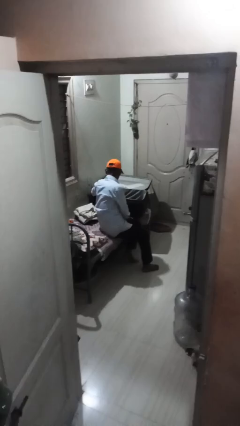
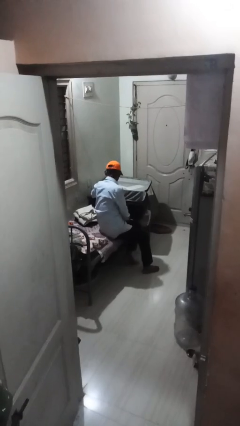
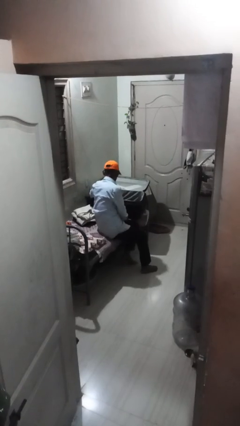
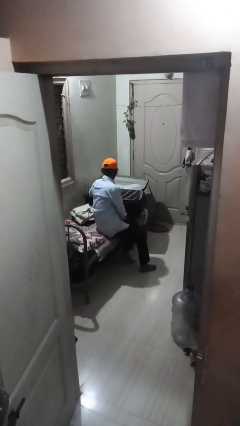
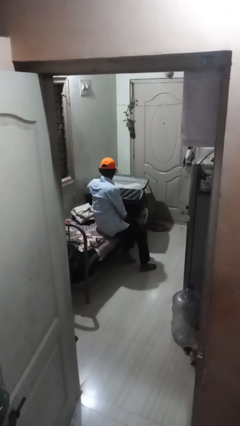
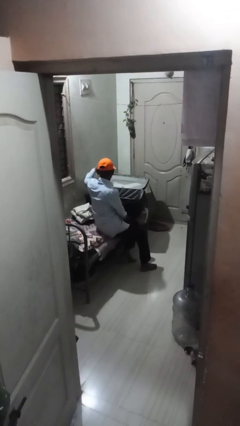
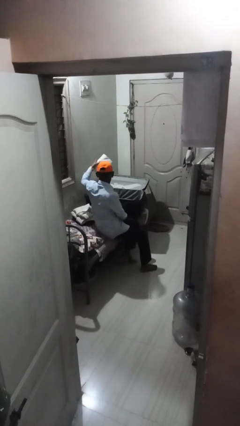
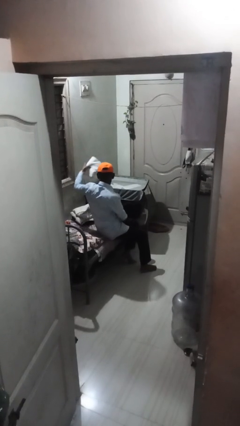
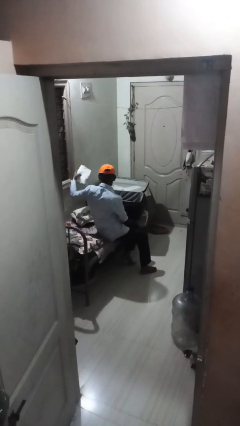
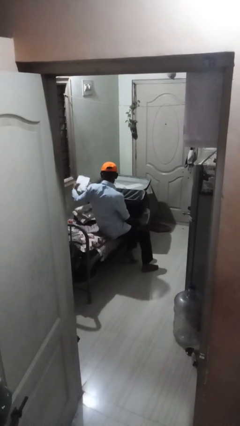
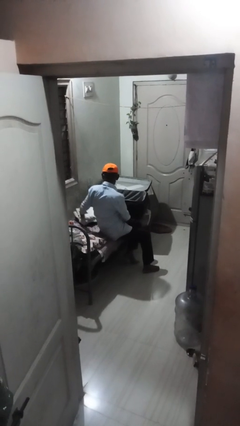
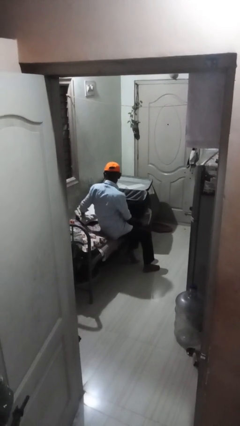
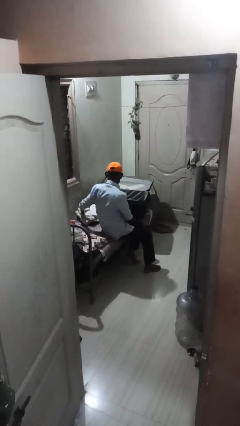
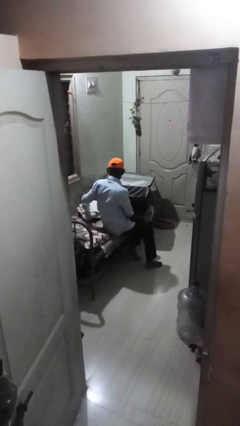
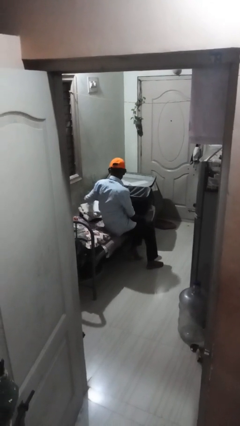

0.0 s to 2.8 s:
person unloads clothes from suitcase

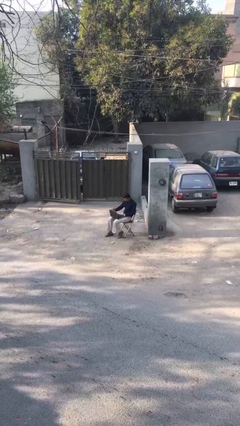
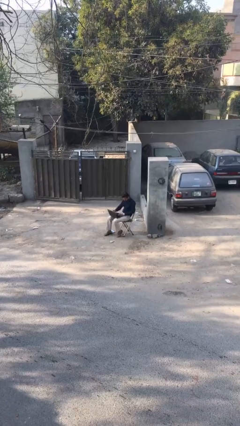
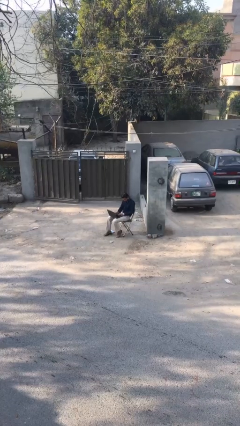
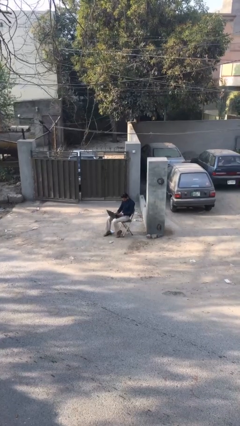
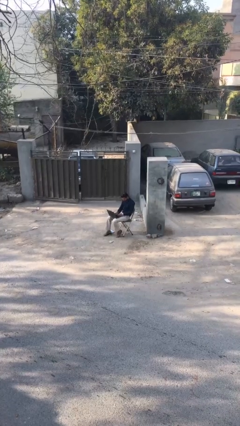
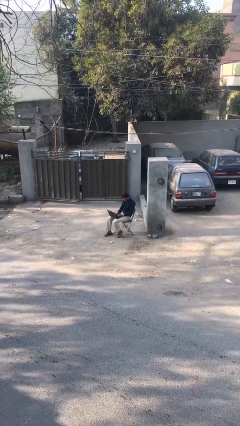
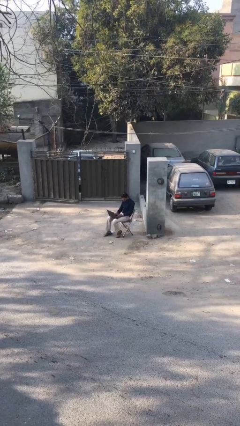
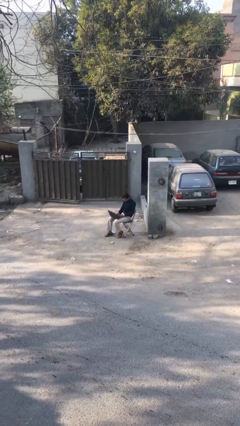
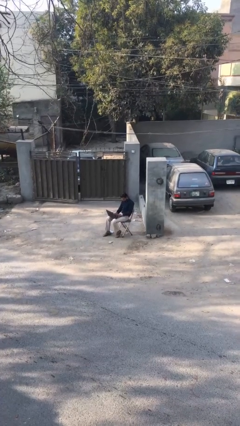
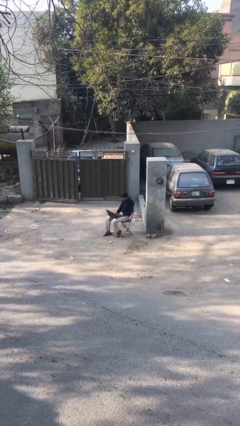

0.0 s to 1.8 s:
person interacts with laptop

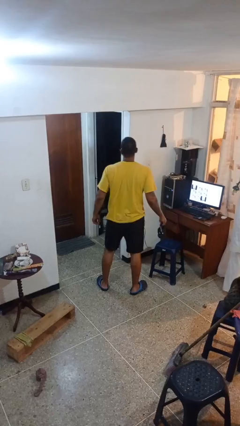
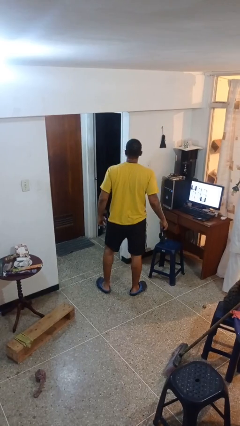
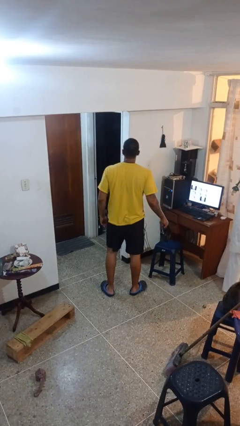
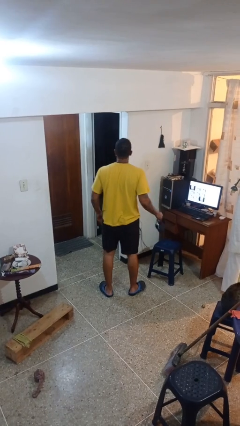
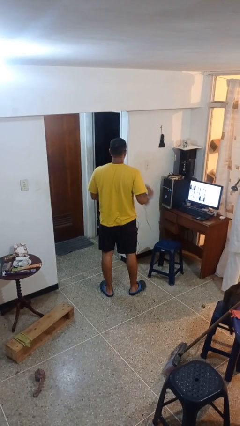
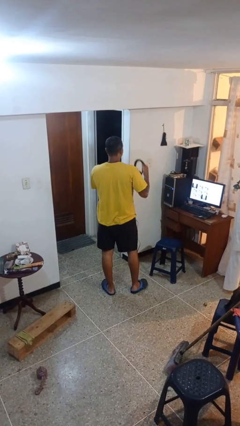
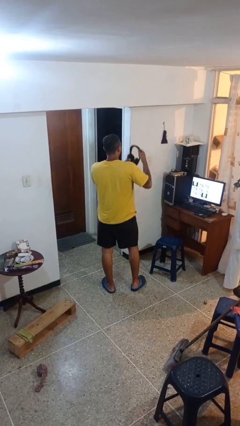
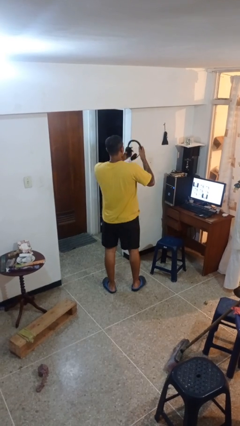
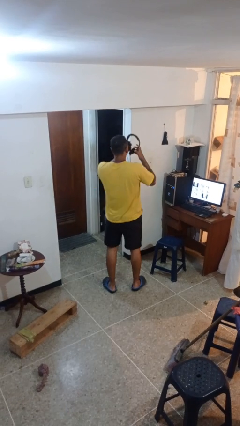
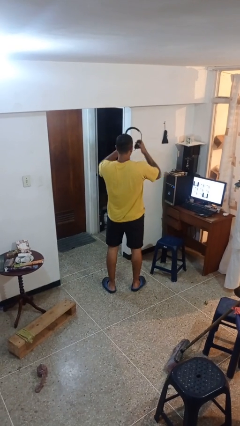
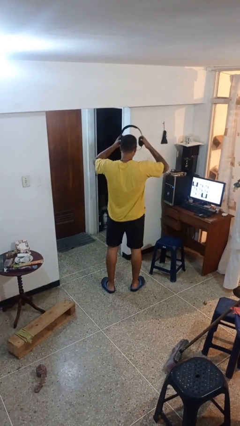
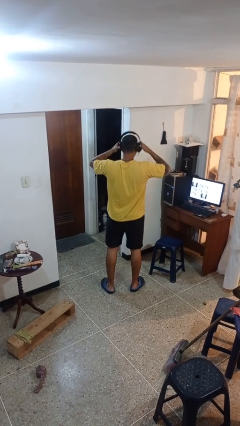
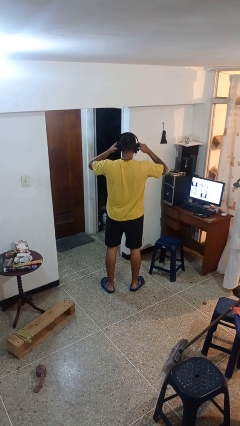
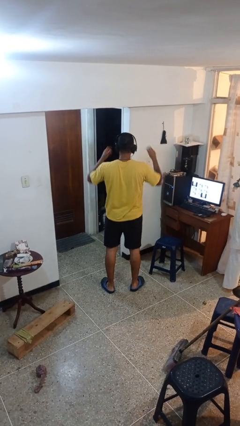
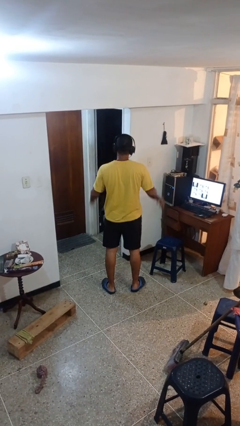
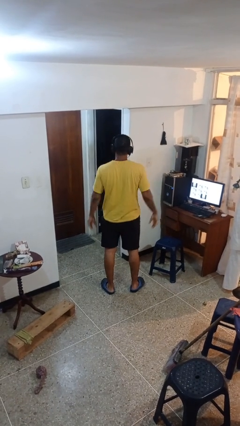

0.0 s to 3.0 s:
person puts on headphones

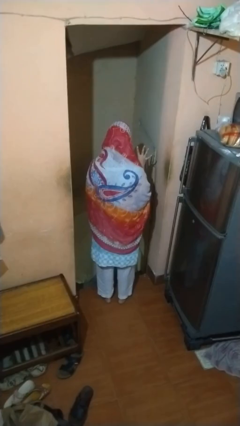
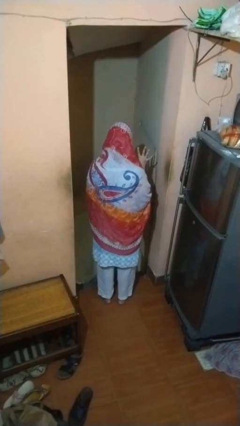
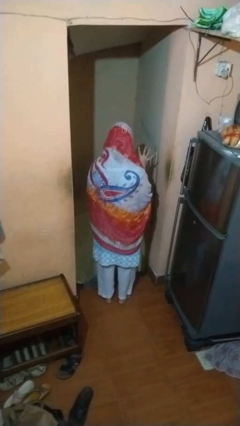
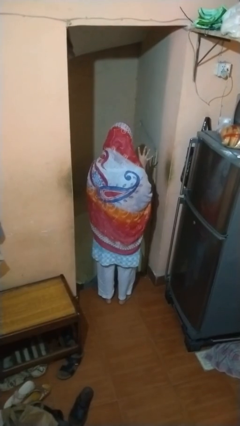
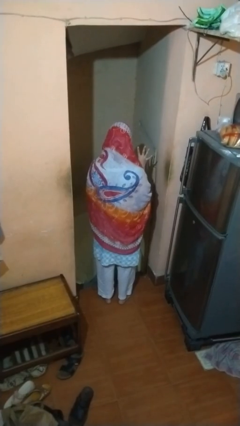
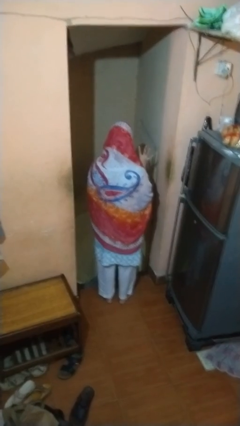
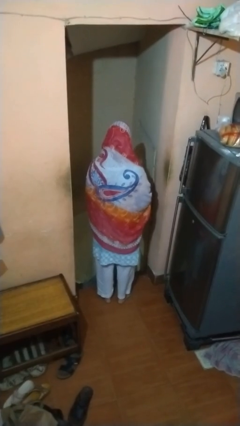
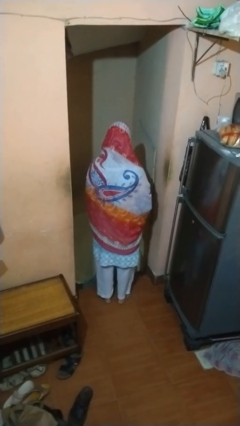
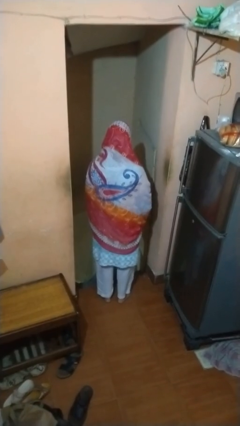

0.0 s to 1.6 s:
person gestures number four

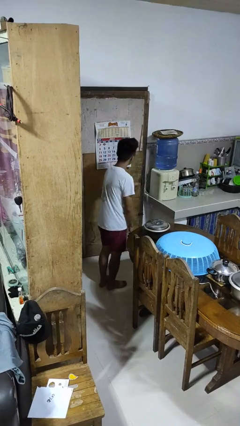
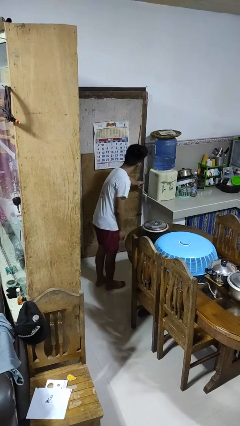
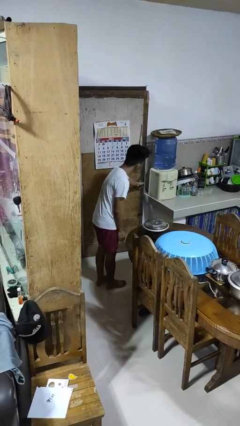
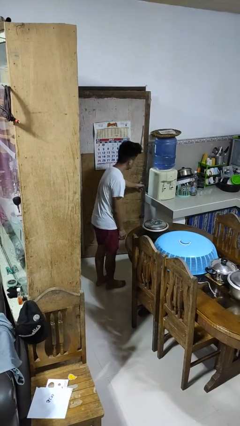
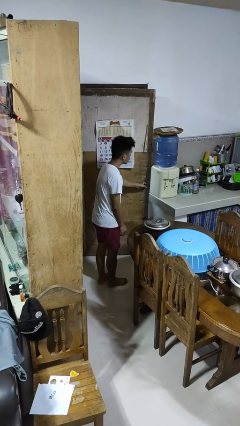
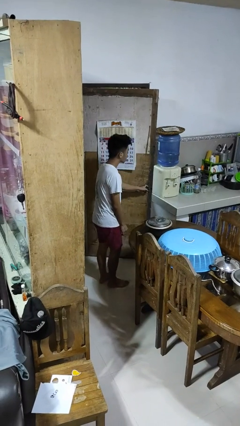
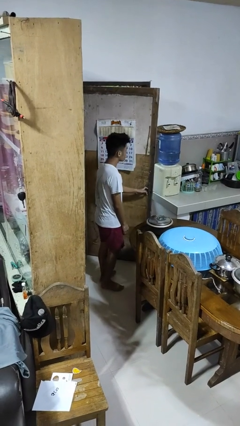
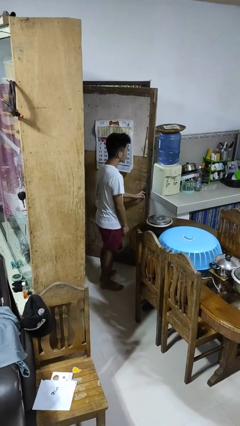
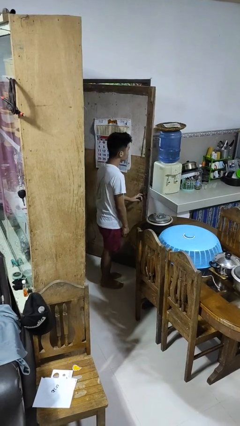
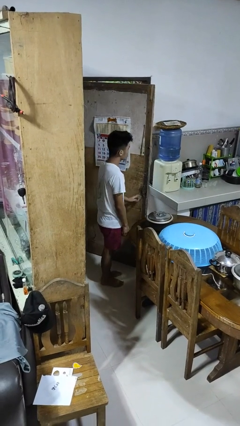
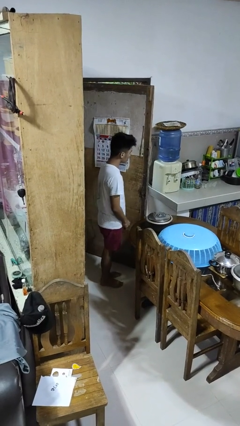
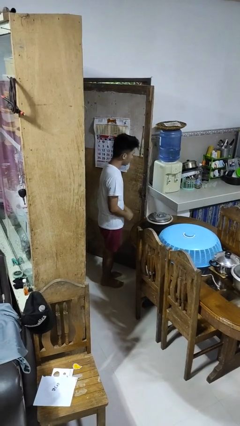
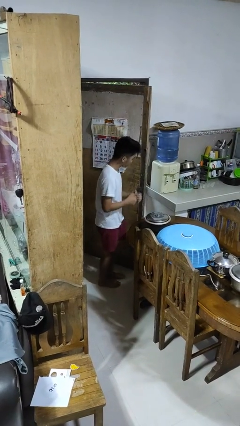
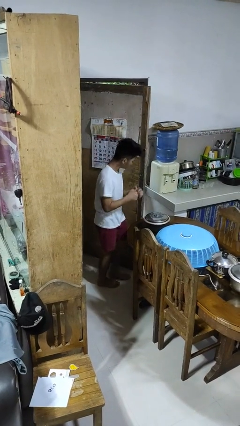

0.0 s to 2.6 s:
person opens facility door

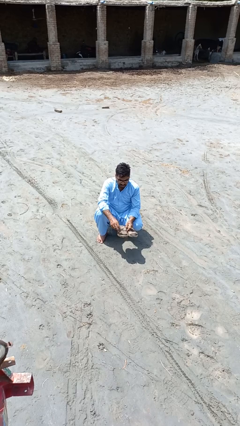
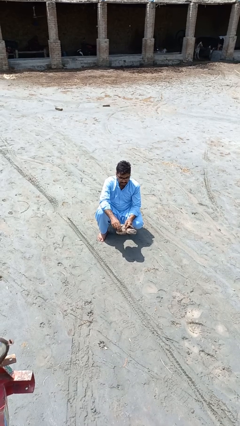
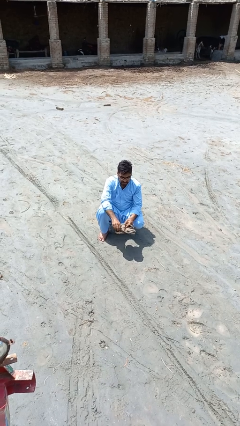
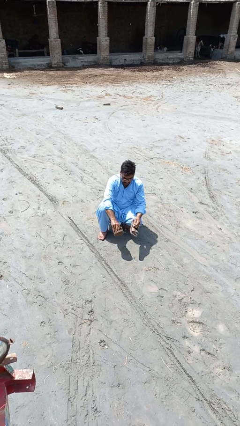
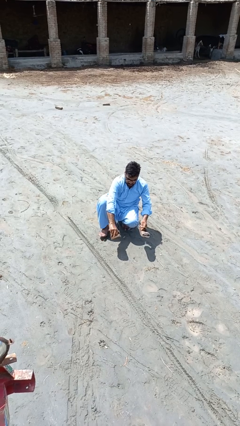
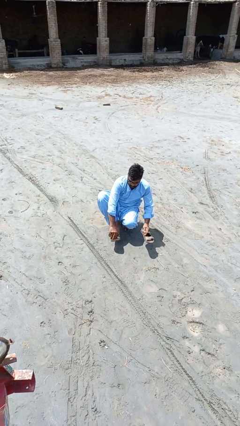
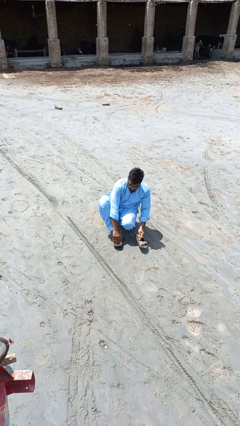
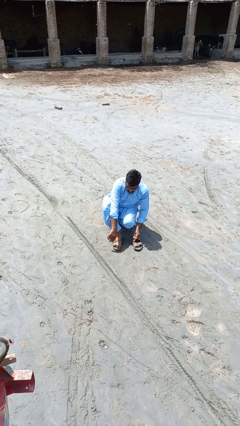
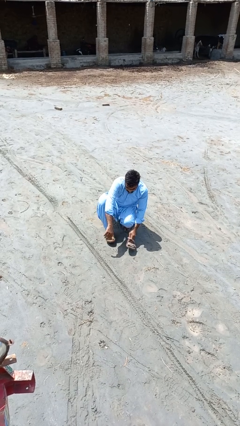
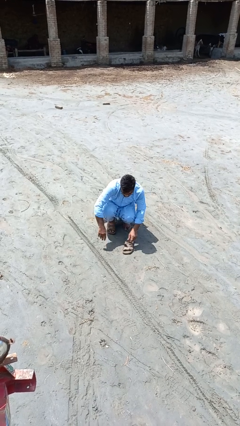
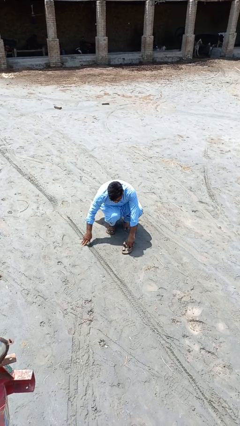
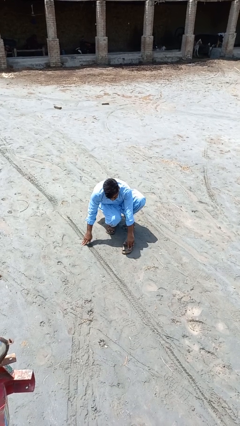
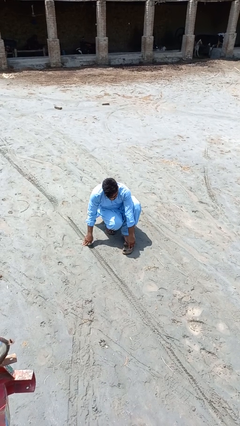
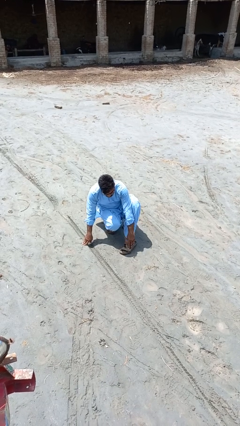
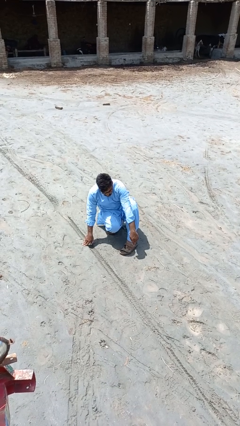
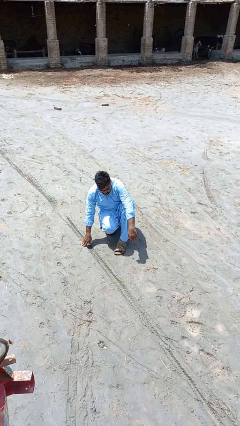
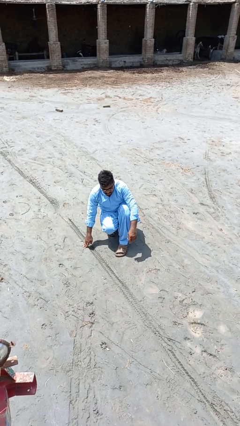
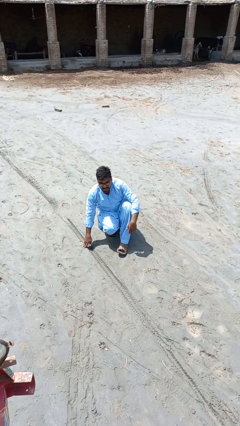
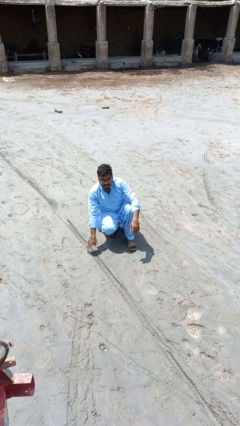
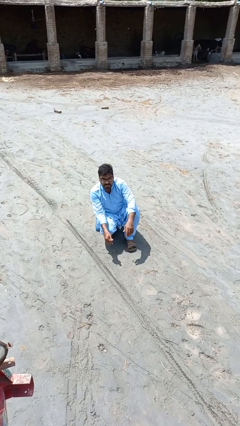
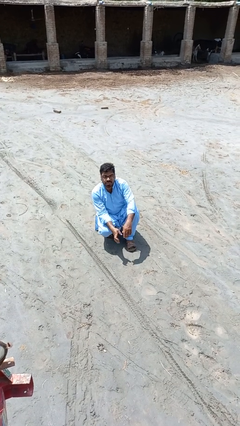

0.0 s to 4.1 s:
person puts on shoes

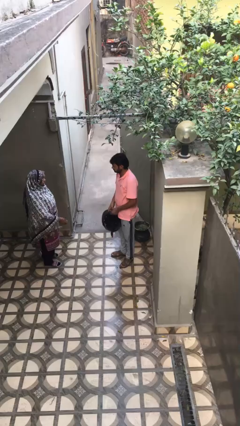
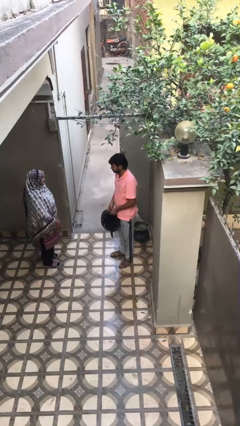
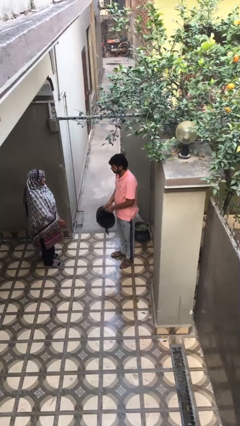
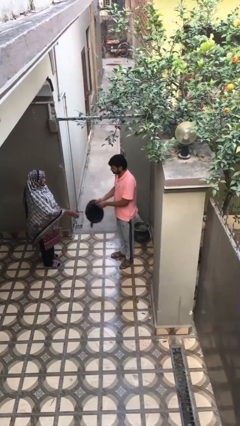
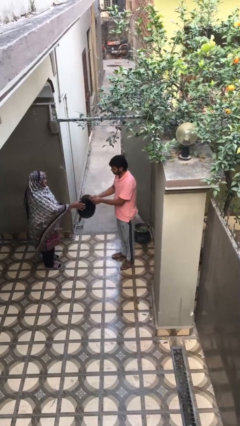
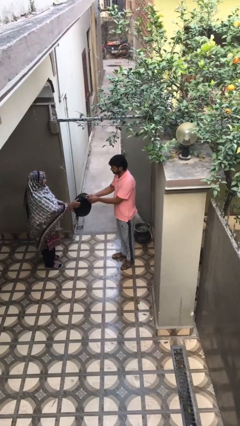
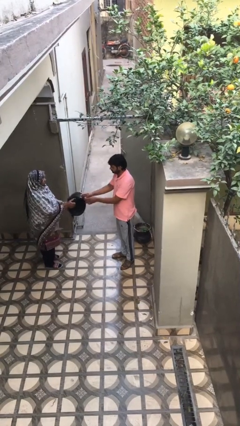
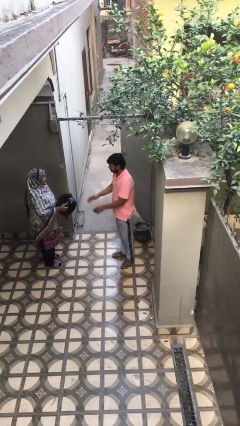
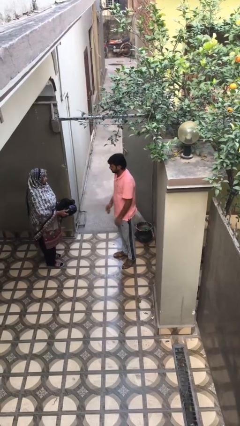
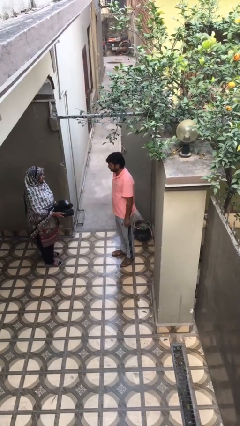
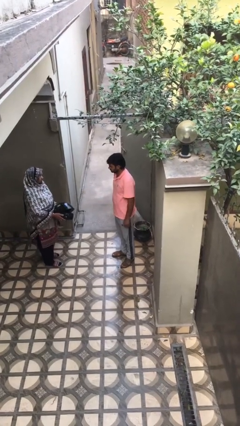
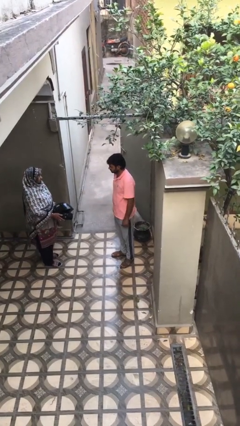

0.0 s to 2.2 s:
person transfers object to person
